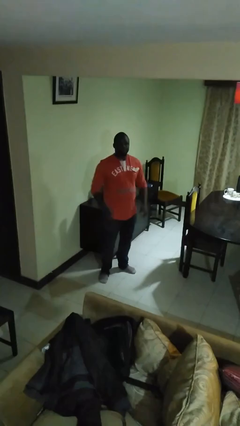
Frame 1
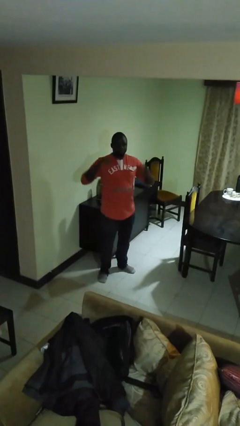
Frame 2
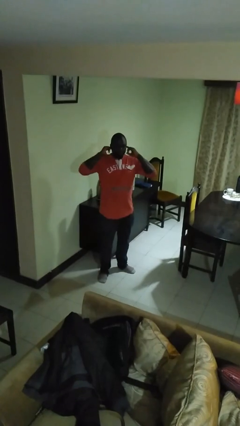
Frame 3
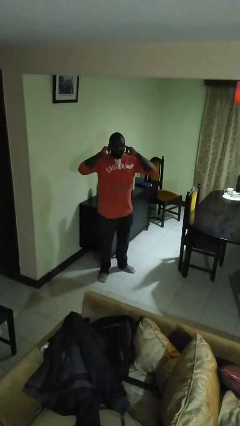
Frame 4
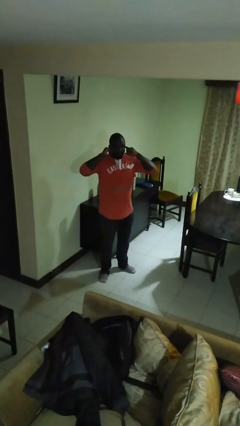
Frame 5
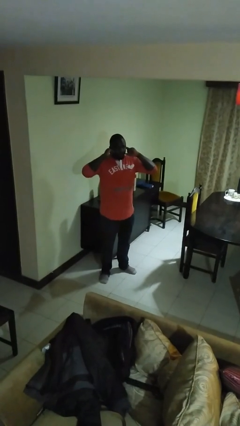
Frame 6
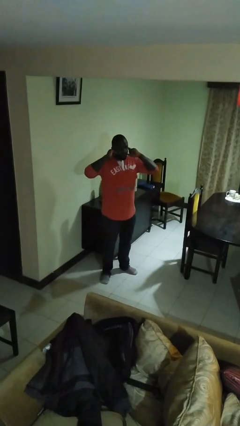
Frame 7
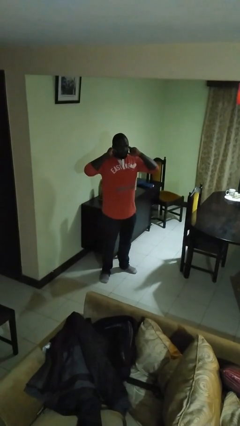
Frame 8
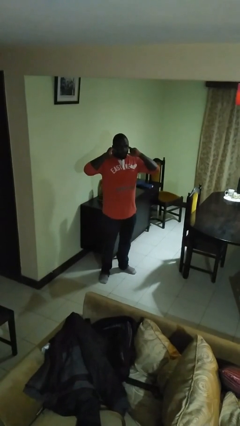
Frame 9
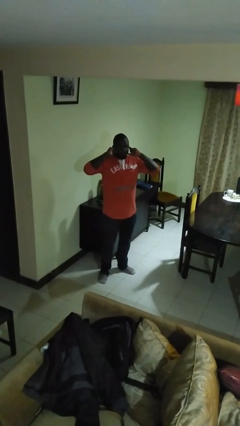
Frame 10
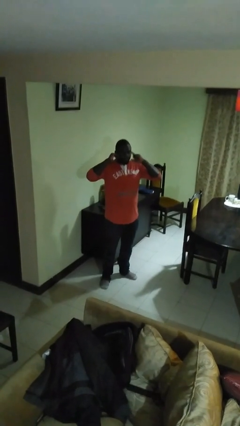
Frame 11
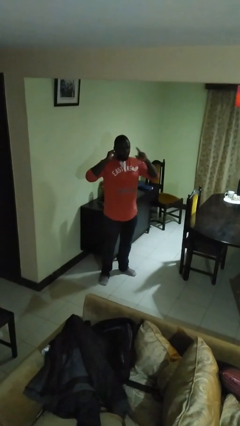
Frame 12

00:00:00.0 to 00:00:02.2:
person puts fingers in ear

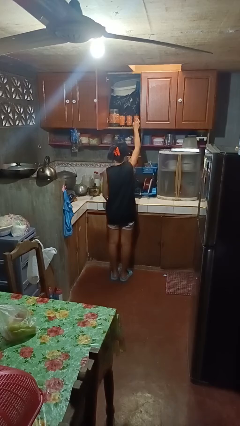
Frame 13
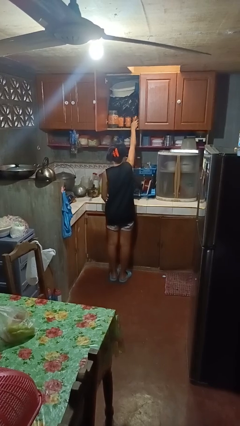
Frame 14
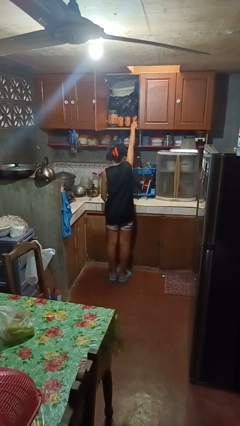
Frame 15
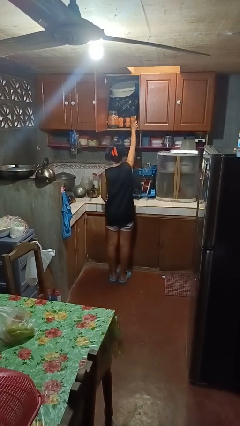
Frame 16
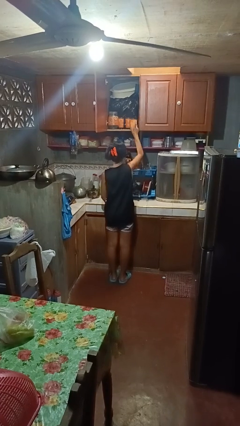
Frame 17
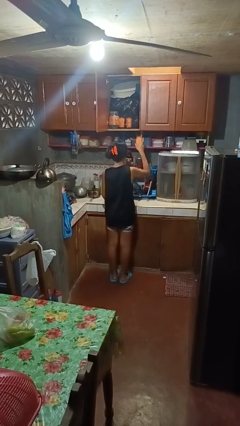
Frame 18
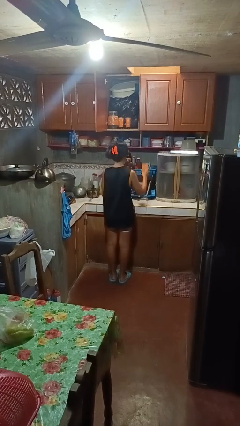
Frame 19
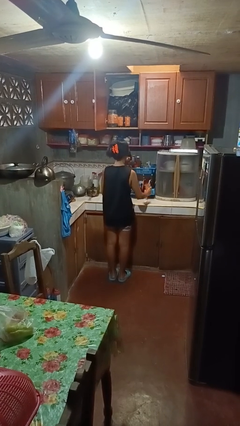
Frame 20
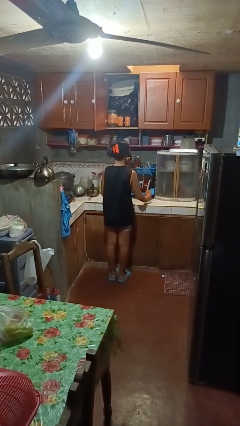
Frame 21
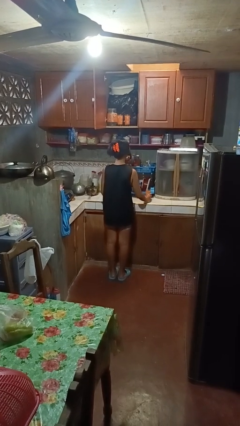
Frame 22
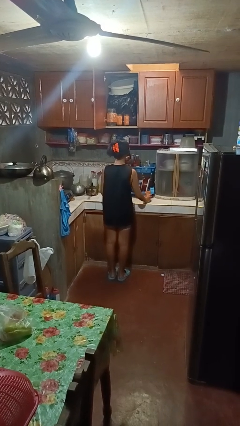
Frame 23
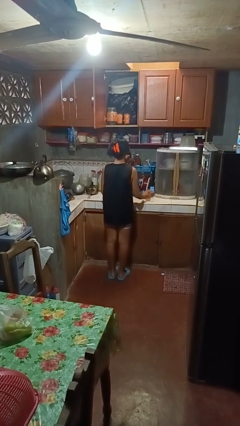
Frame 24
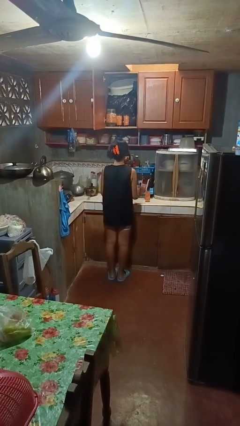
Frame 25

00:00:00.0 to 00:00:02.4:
person takes object from cabinet

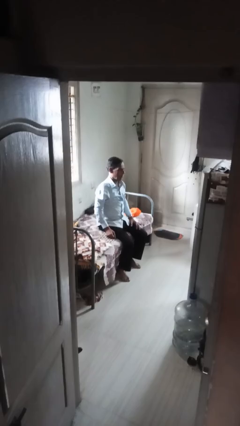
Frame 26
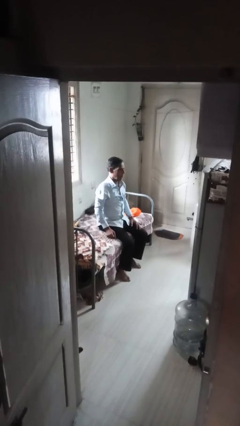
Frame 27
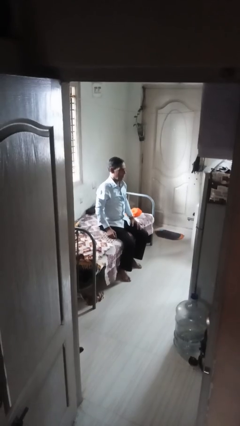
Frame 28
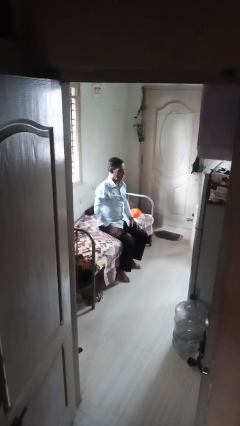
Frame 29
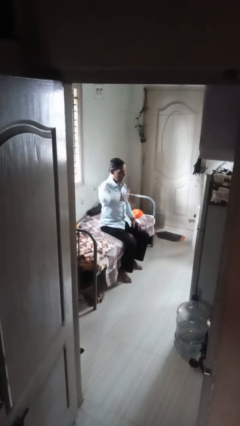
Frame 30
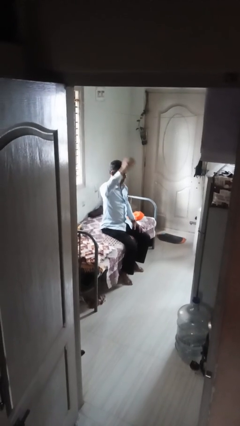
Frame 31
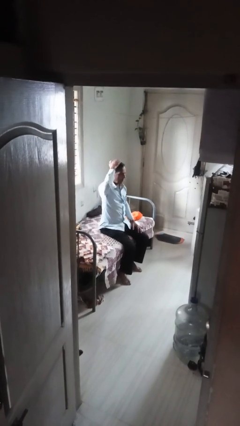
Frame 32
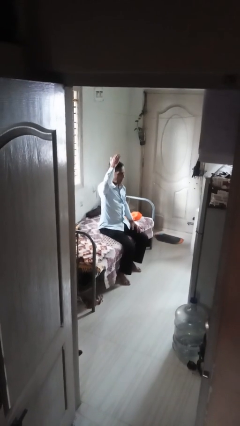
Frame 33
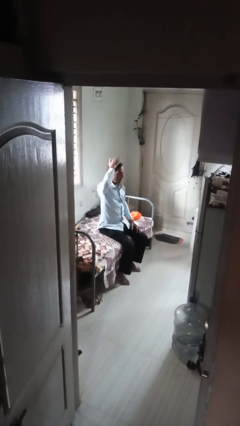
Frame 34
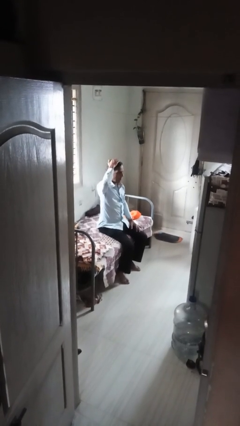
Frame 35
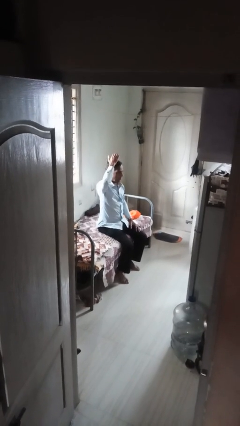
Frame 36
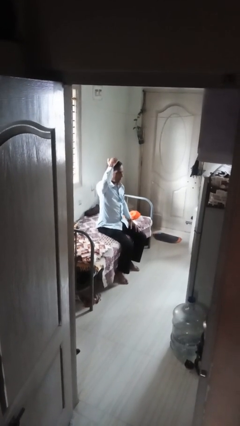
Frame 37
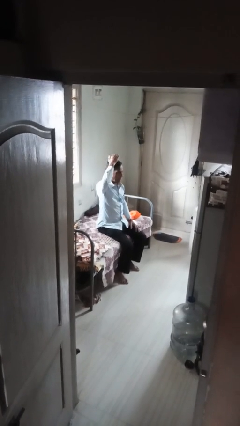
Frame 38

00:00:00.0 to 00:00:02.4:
person pats head

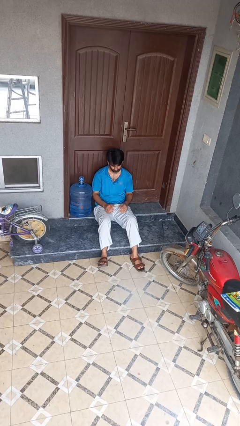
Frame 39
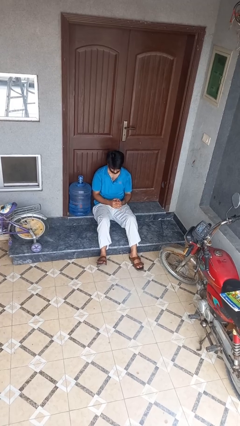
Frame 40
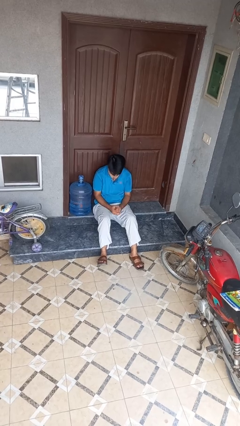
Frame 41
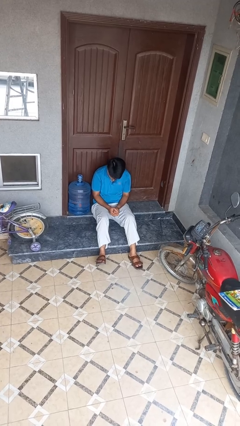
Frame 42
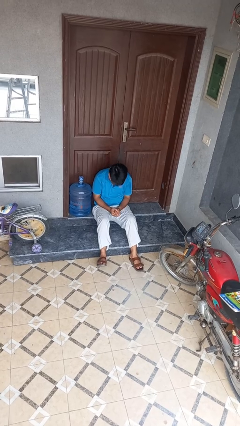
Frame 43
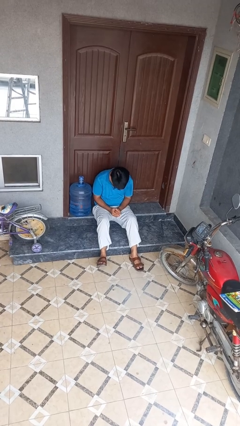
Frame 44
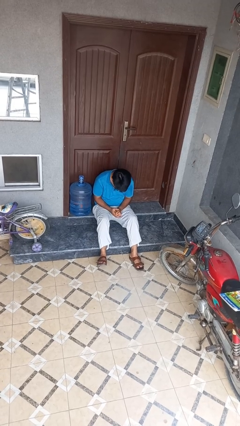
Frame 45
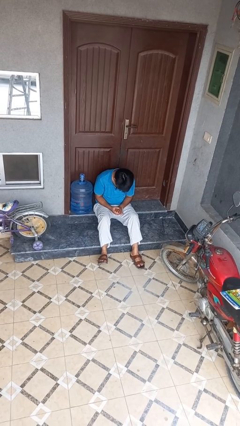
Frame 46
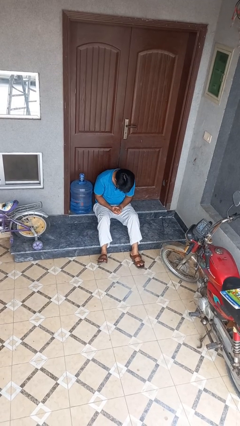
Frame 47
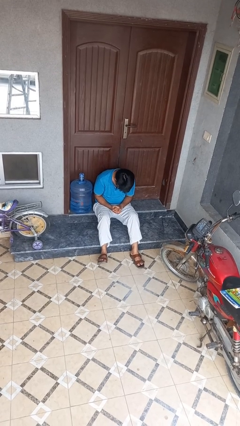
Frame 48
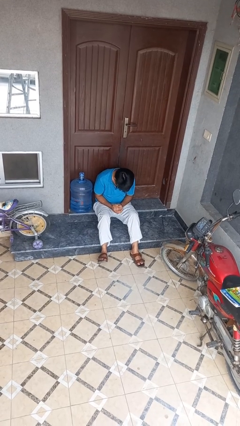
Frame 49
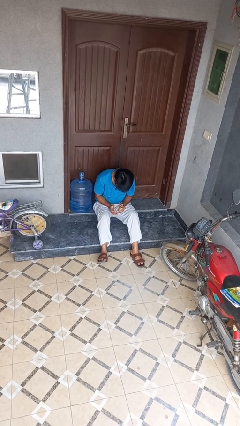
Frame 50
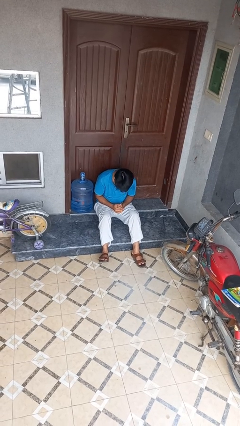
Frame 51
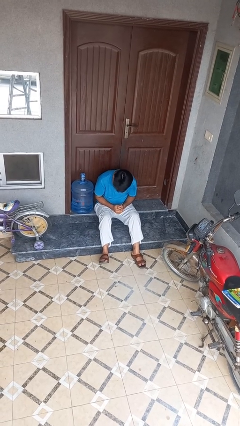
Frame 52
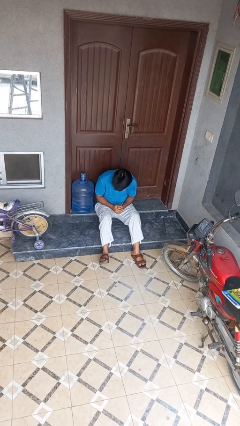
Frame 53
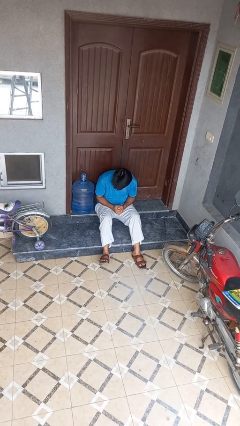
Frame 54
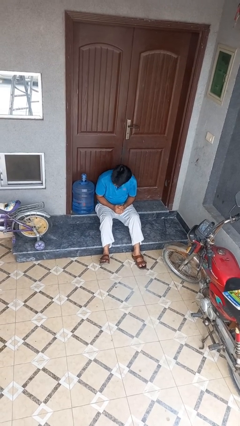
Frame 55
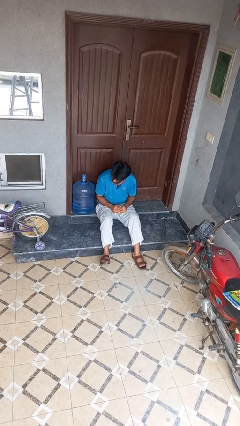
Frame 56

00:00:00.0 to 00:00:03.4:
person looks at hands in lap

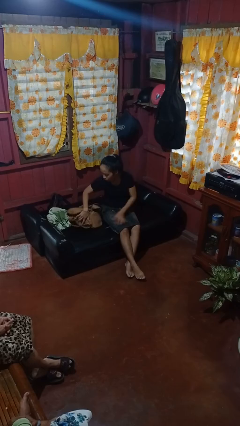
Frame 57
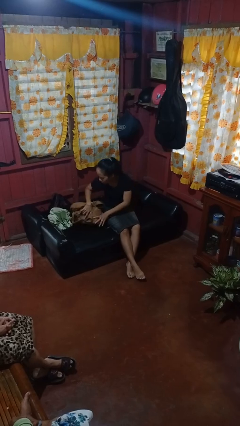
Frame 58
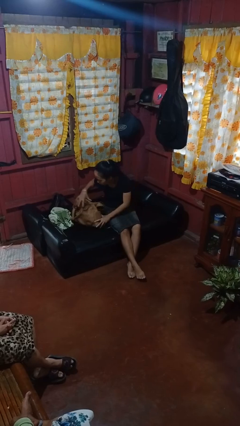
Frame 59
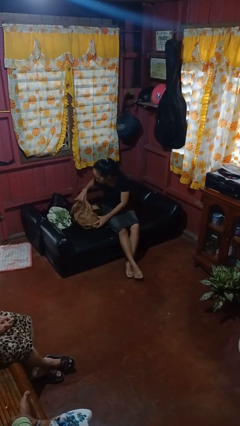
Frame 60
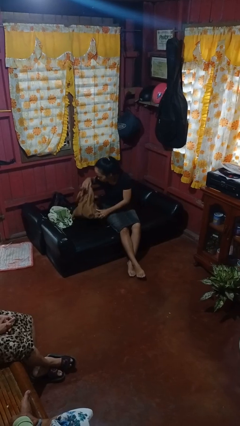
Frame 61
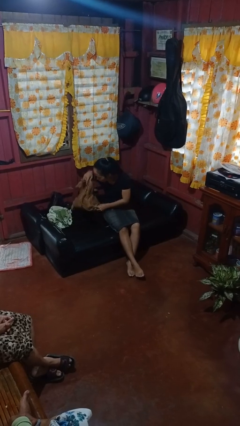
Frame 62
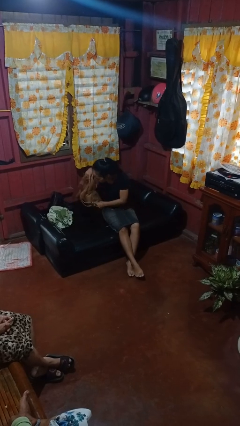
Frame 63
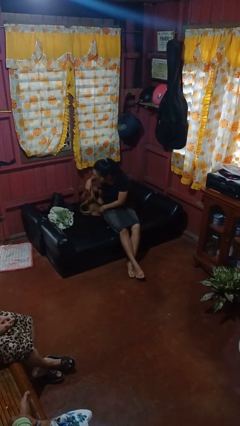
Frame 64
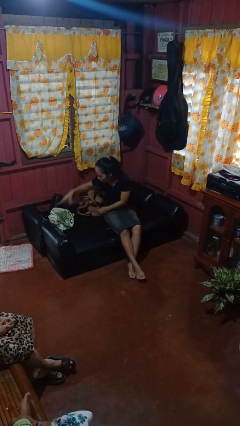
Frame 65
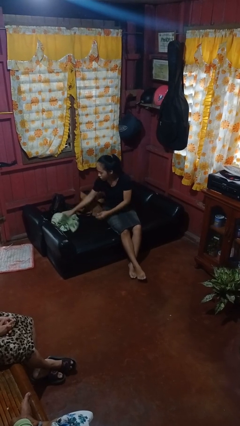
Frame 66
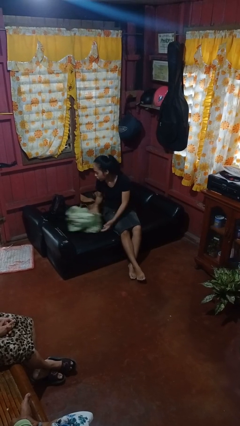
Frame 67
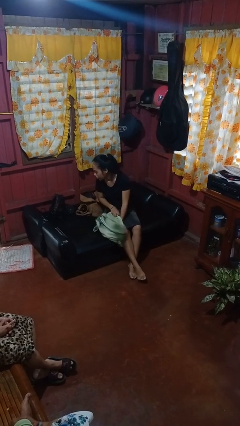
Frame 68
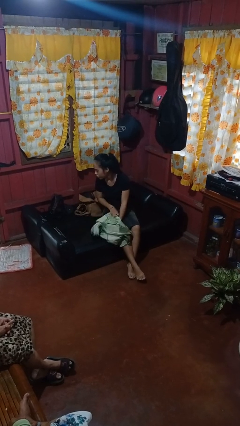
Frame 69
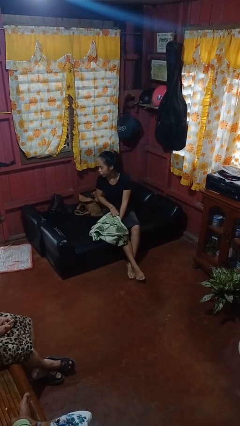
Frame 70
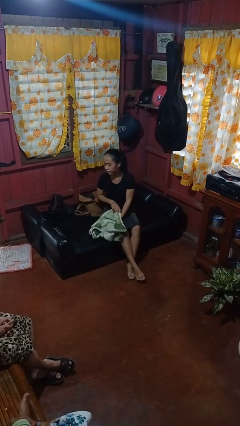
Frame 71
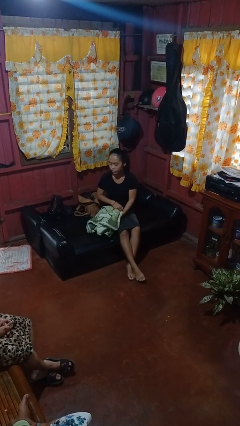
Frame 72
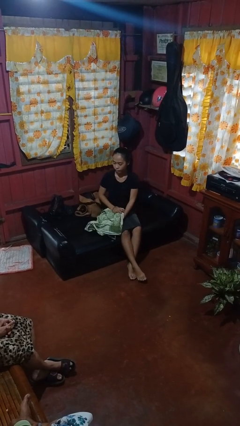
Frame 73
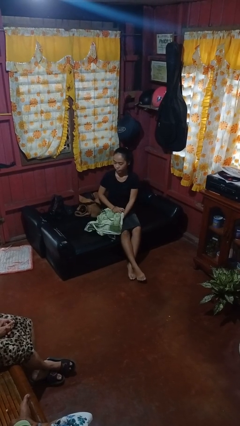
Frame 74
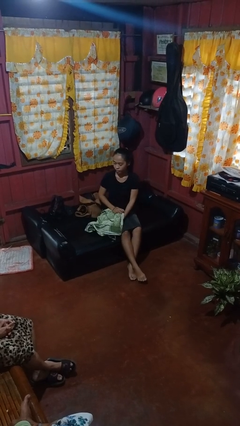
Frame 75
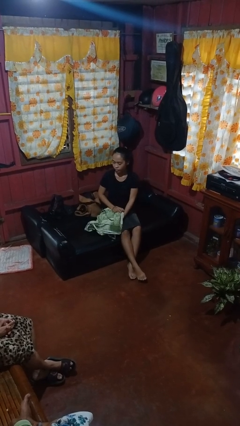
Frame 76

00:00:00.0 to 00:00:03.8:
person searches in couch

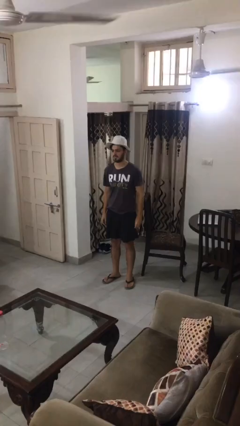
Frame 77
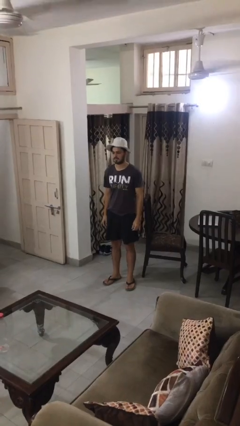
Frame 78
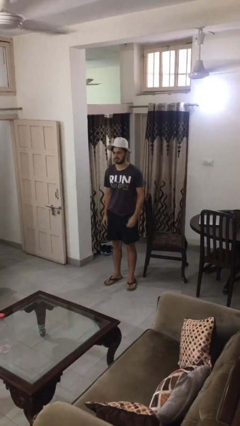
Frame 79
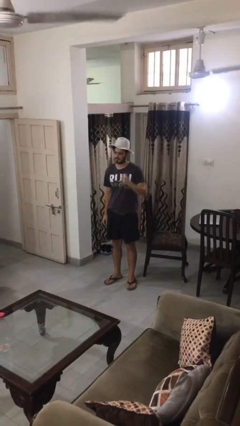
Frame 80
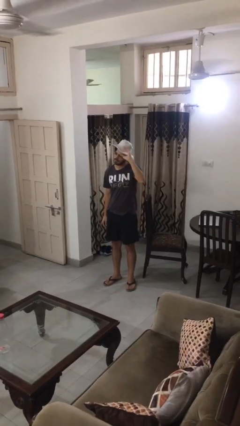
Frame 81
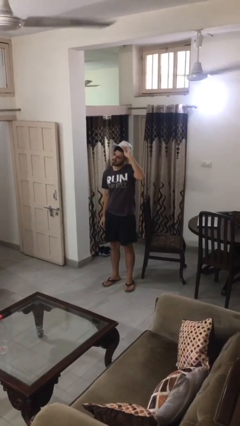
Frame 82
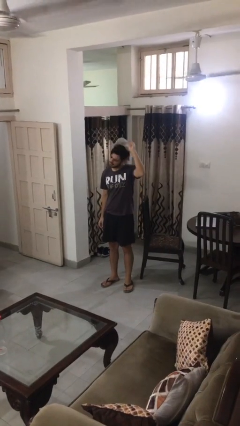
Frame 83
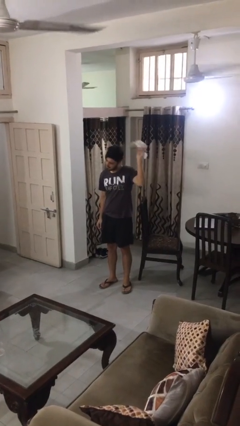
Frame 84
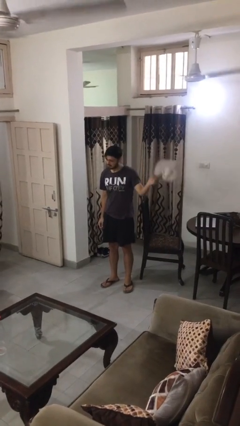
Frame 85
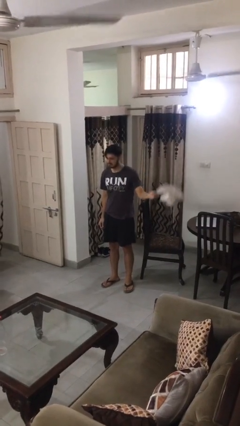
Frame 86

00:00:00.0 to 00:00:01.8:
person takes off hat

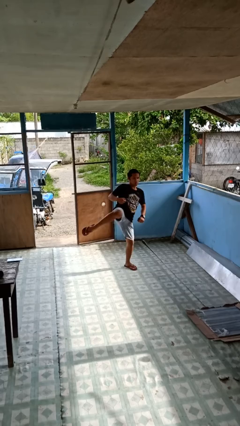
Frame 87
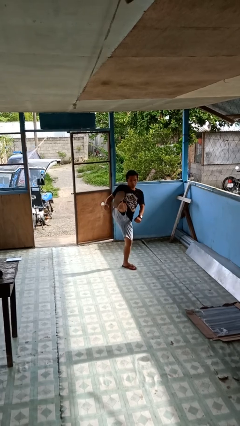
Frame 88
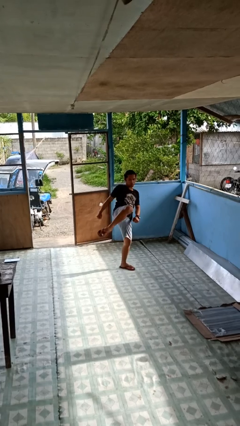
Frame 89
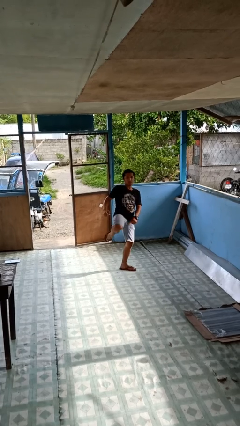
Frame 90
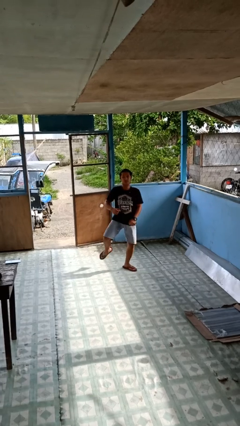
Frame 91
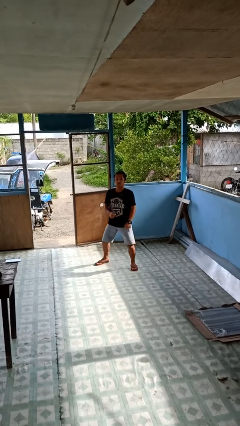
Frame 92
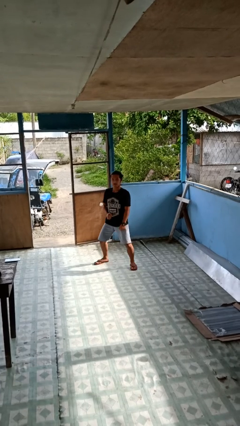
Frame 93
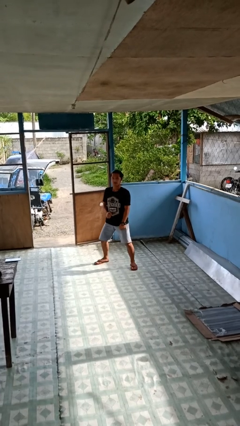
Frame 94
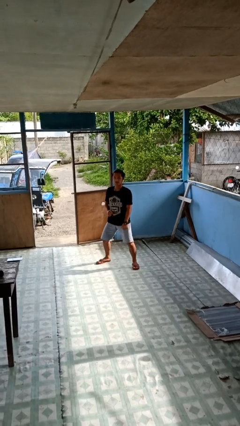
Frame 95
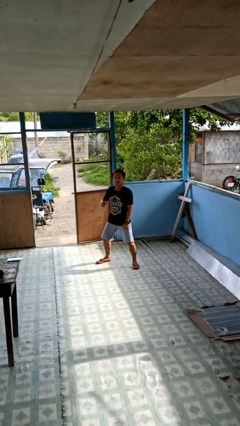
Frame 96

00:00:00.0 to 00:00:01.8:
person karate kicks
